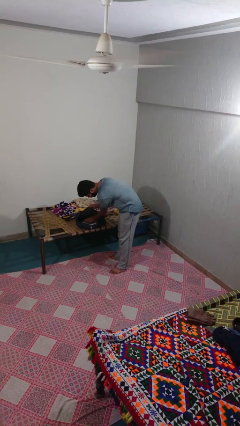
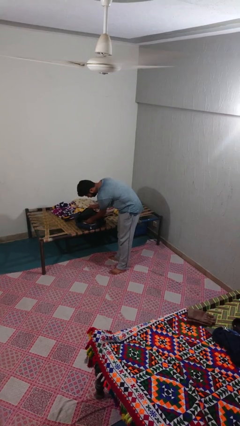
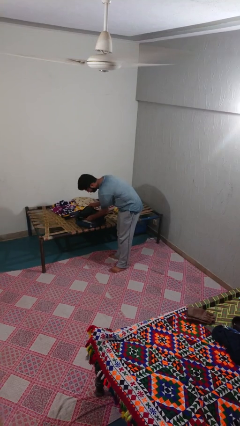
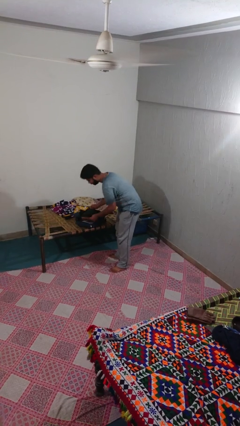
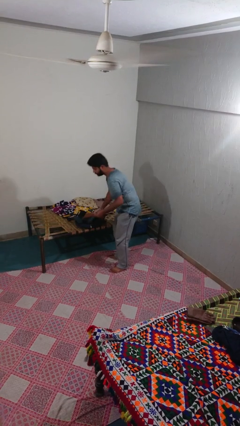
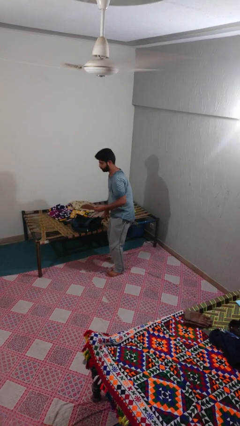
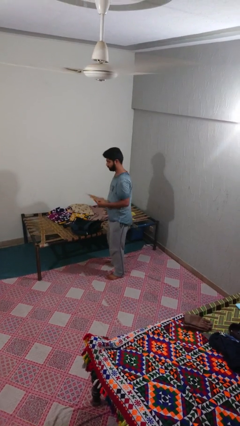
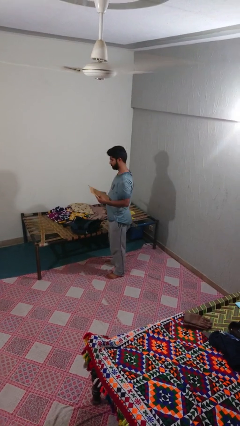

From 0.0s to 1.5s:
person takes object from backpack

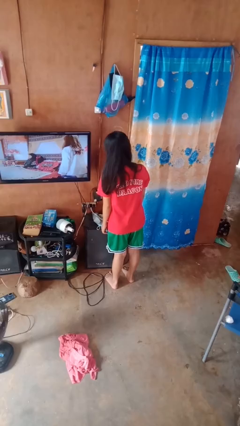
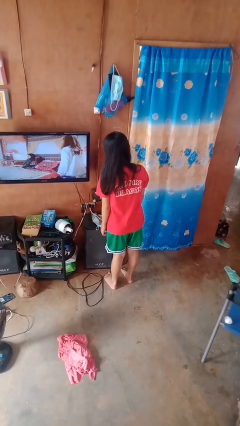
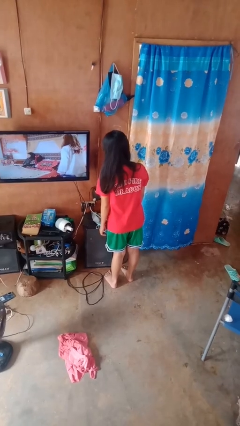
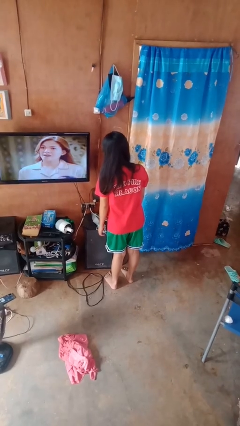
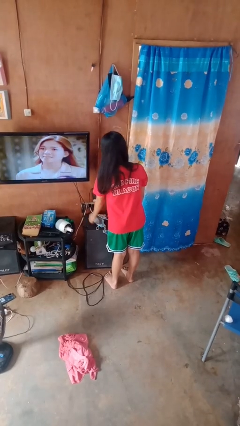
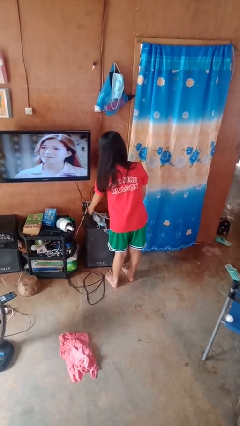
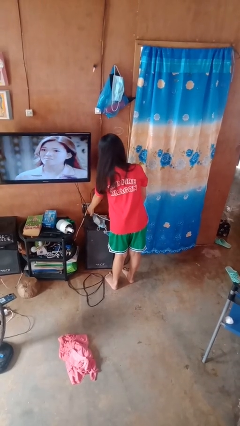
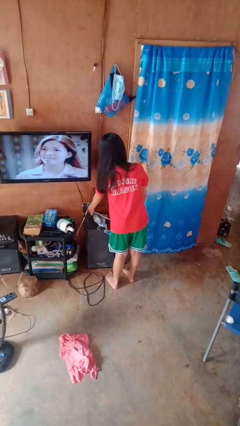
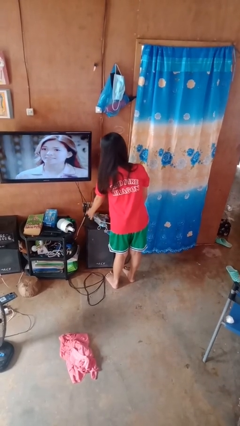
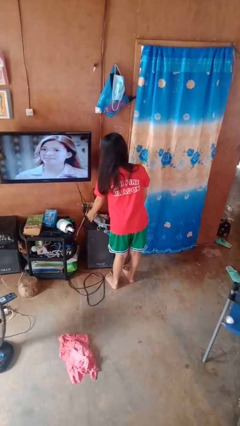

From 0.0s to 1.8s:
person unplugs from electrical socket

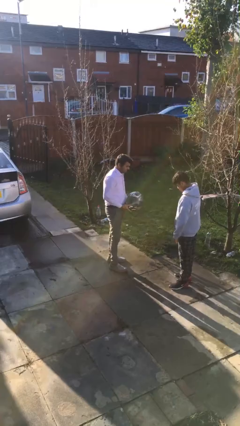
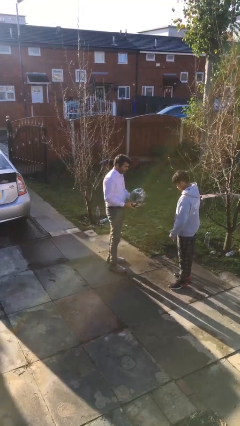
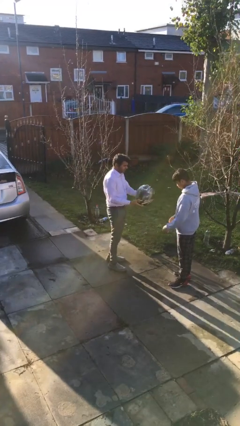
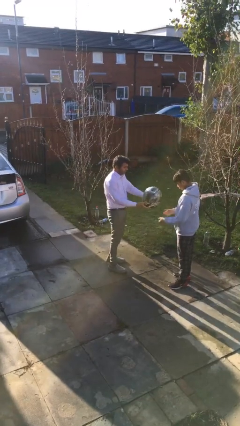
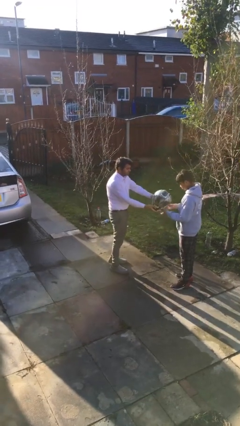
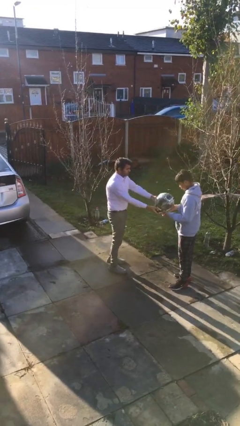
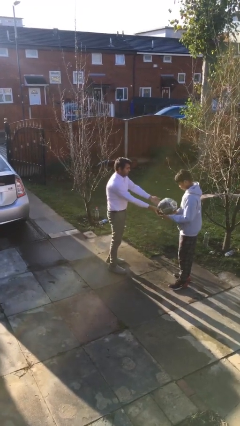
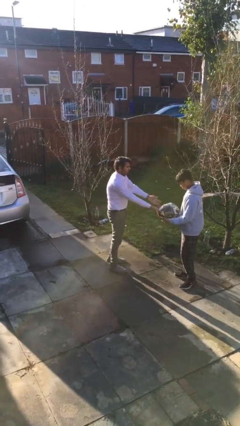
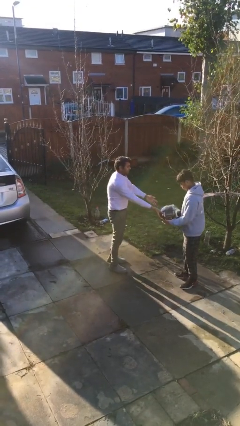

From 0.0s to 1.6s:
person transfers object to person

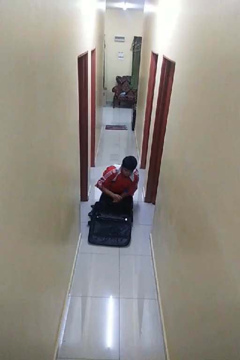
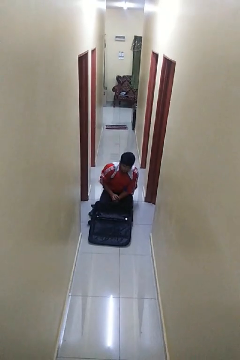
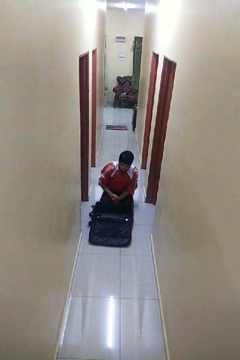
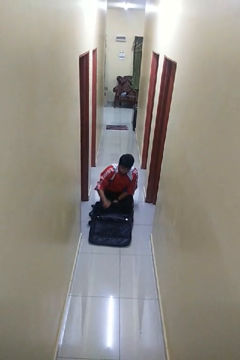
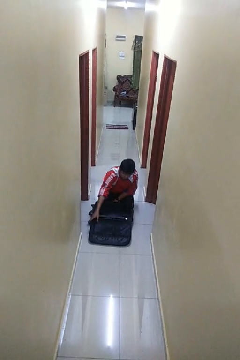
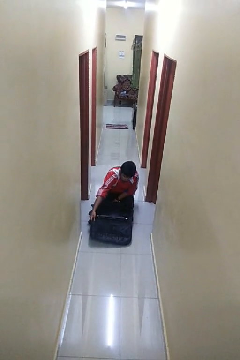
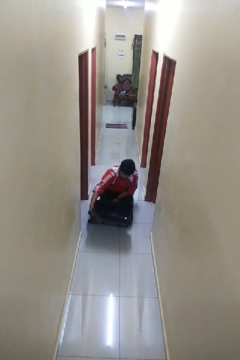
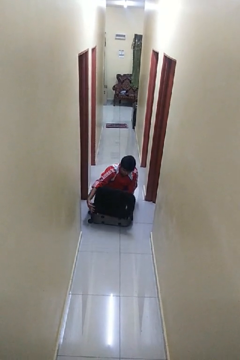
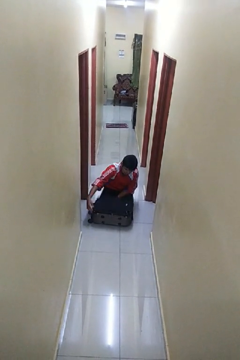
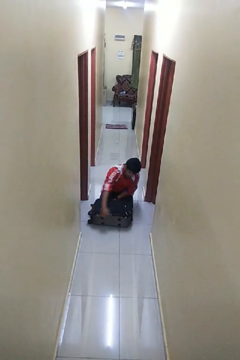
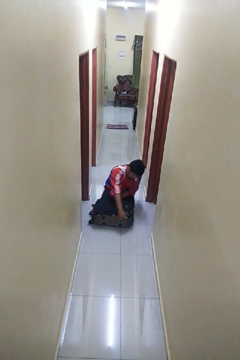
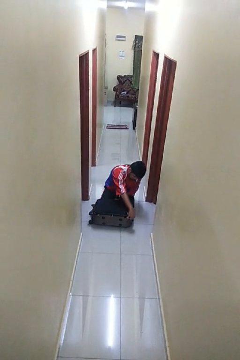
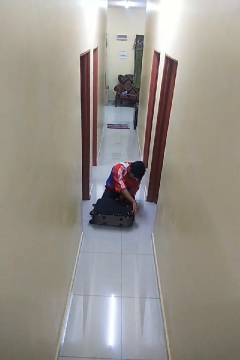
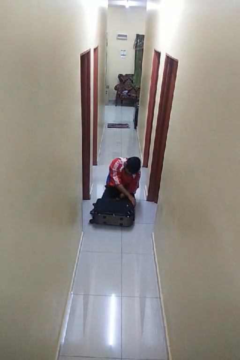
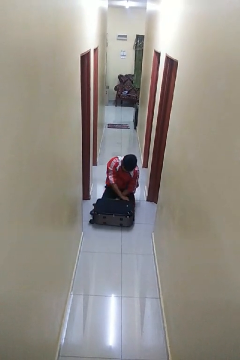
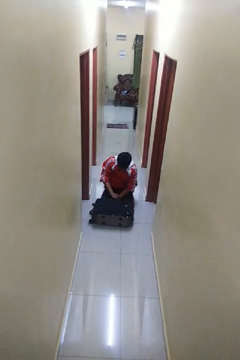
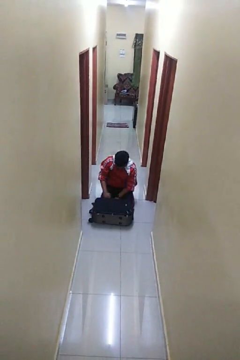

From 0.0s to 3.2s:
person closes suitcase

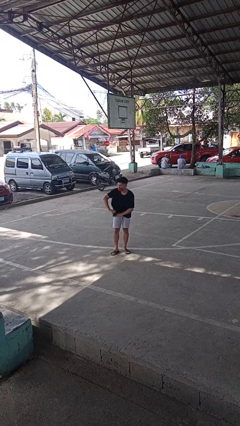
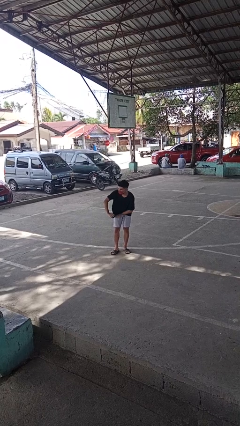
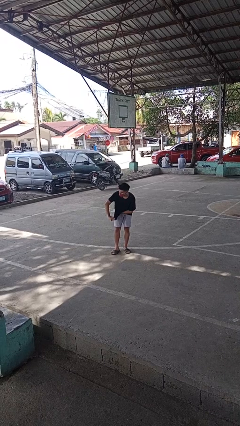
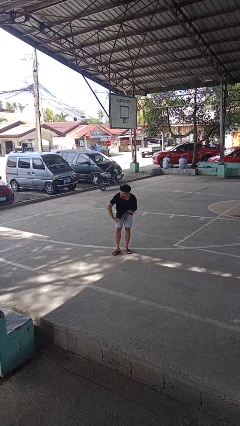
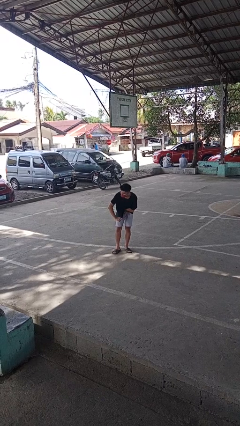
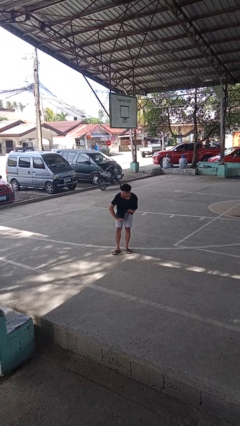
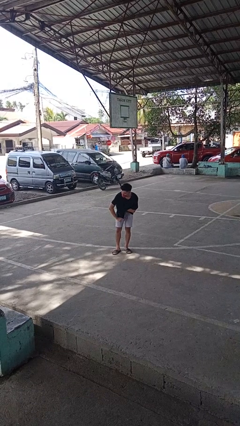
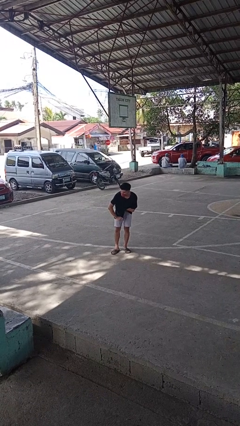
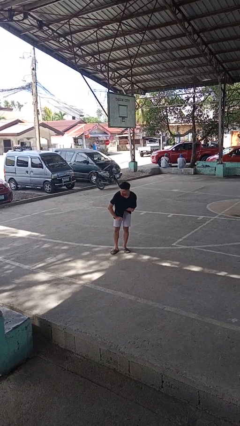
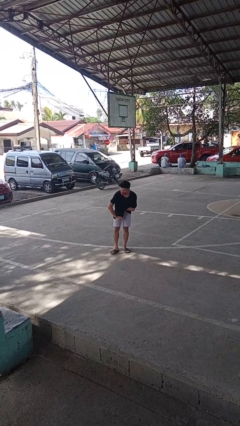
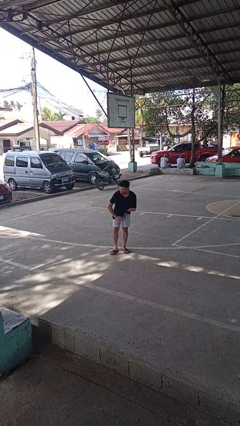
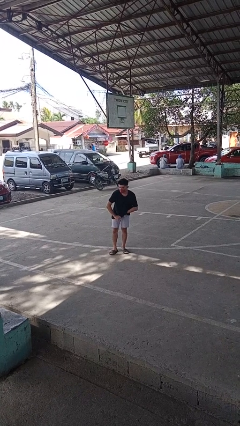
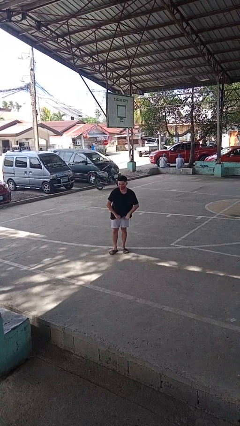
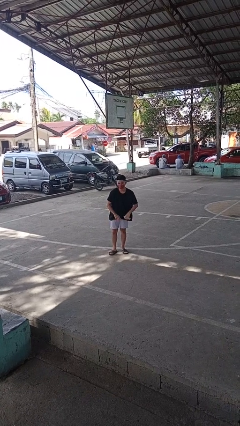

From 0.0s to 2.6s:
person applies deodorant

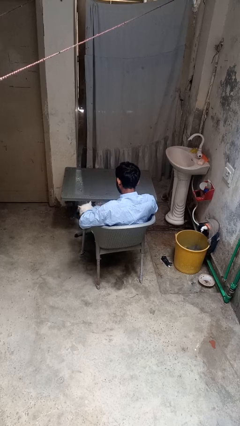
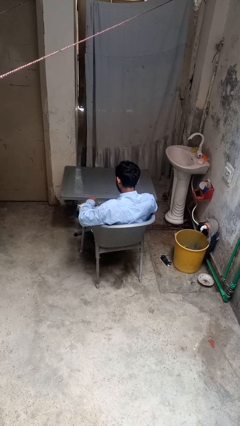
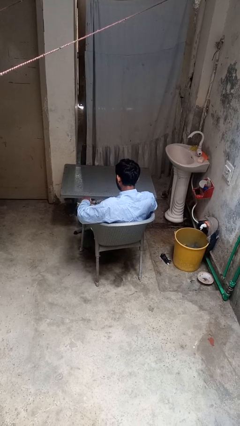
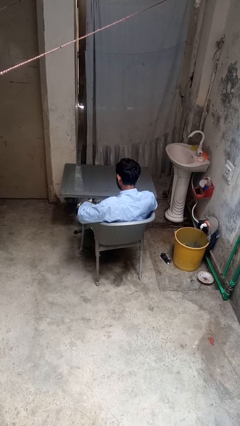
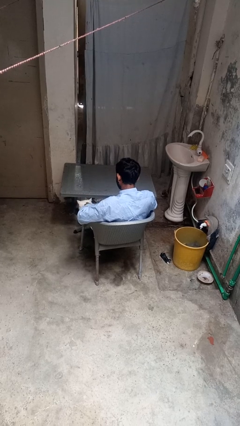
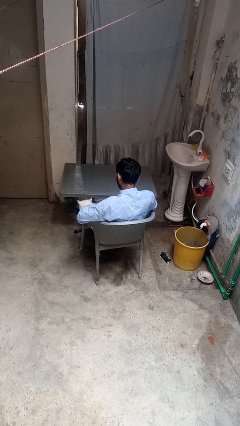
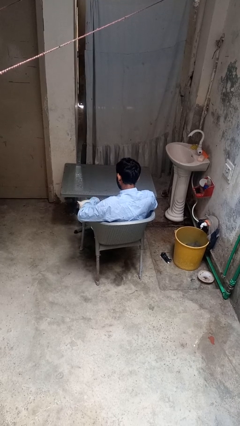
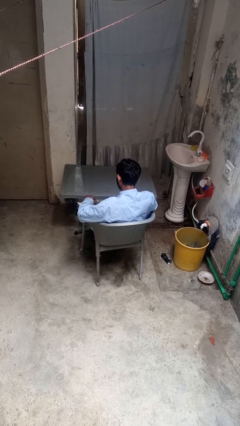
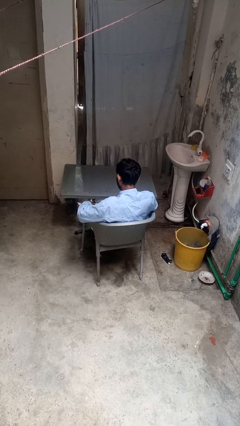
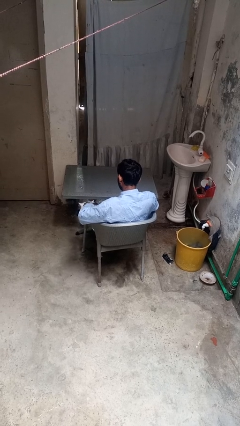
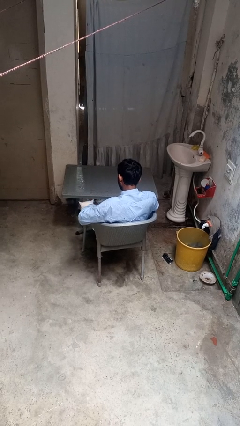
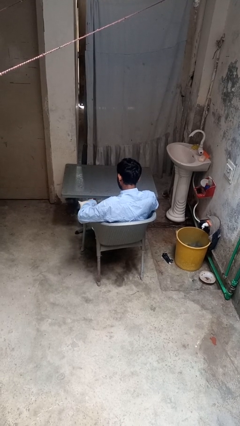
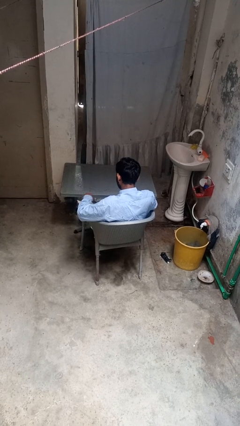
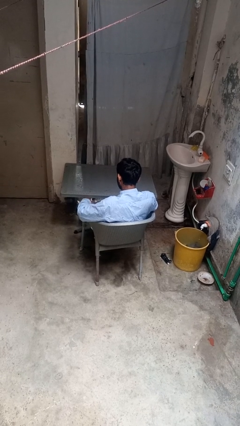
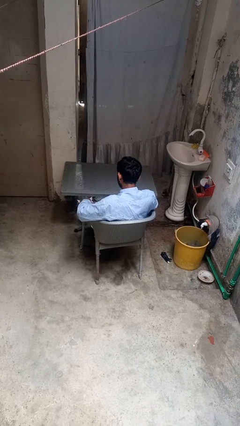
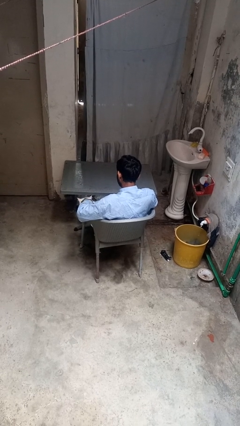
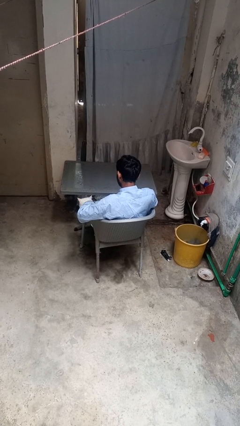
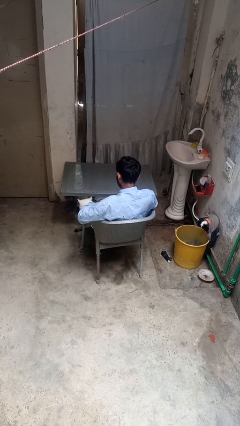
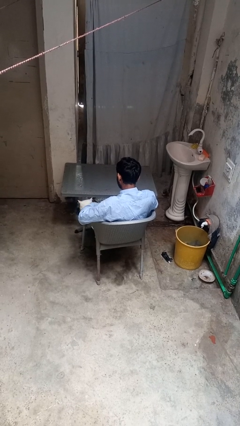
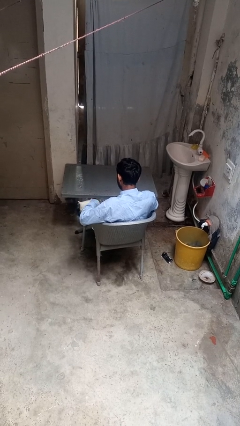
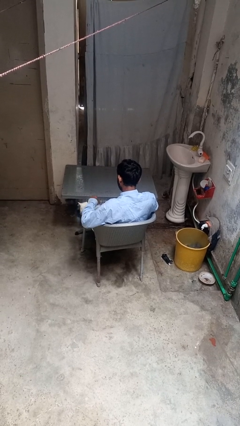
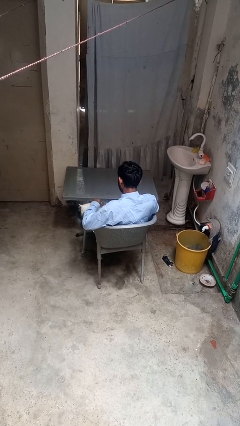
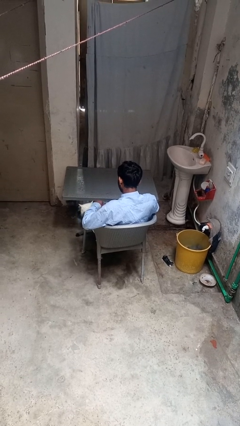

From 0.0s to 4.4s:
person pets cat

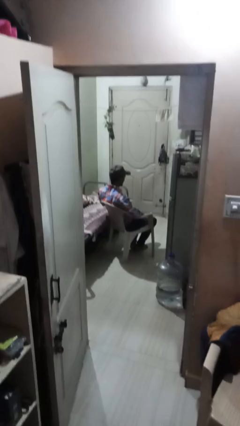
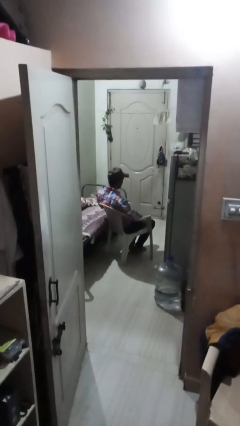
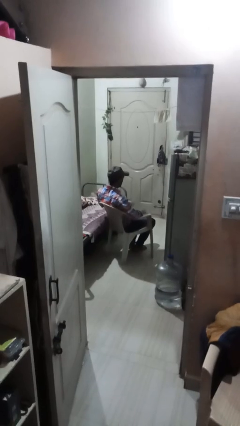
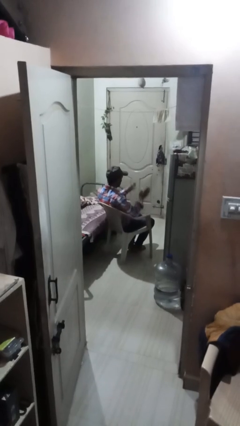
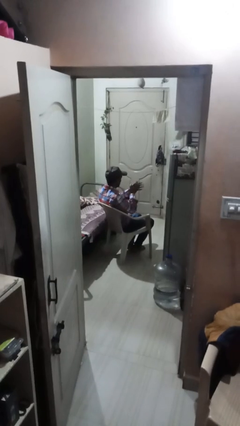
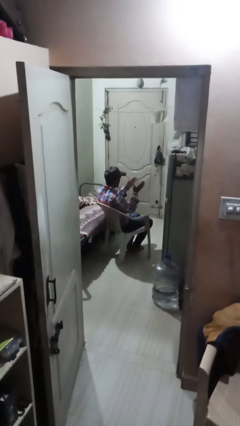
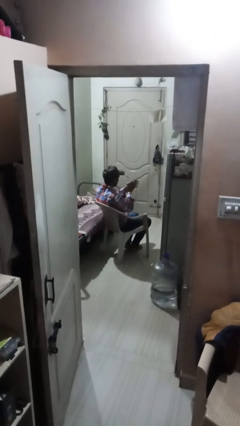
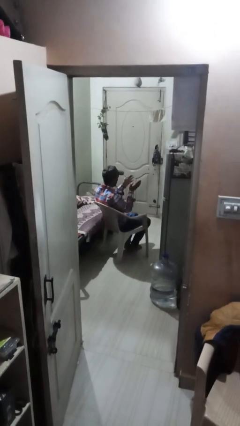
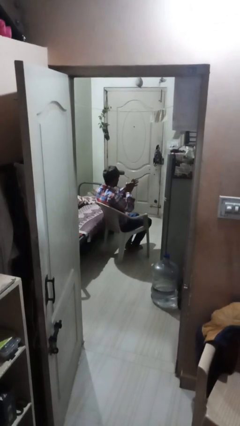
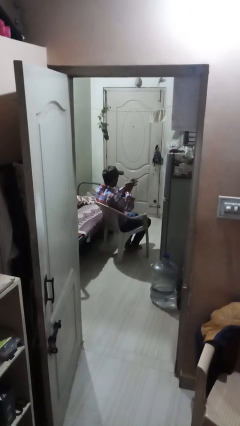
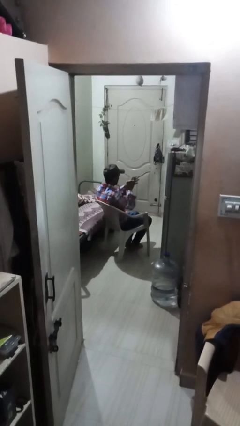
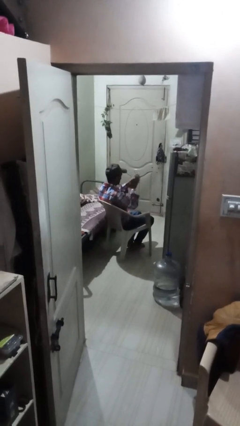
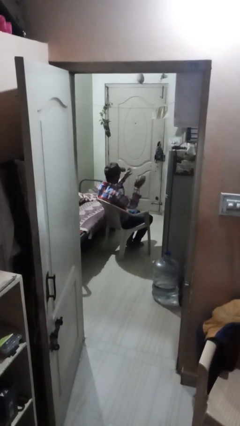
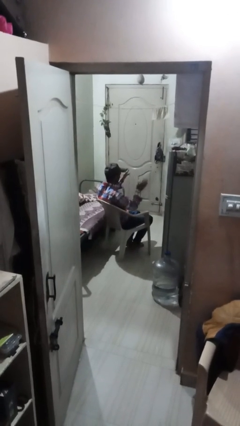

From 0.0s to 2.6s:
person claps hands

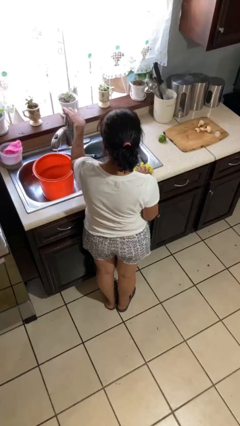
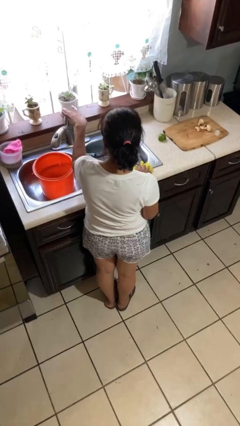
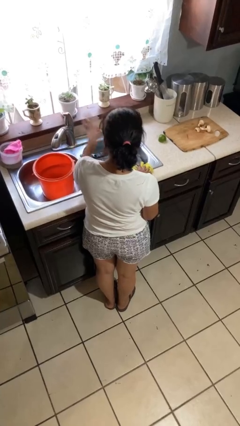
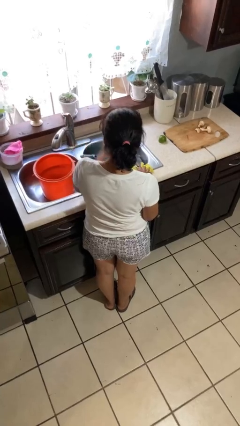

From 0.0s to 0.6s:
person turns off faucet
